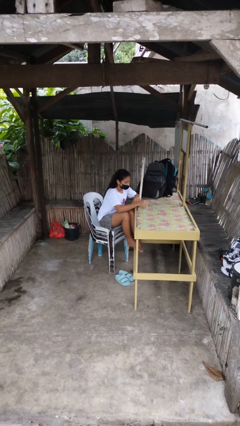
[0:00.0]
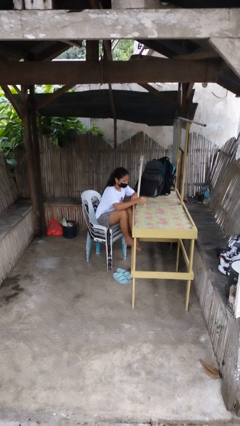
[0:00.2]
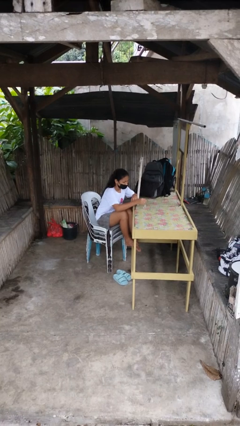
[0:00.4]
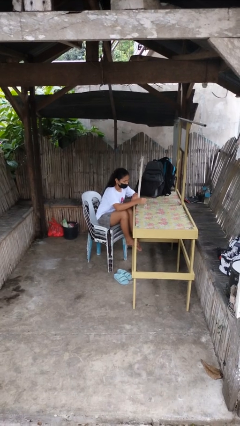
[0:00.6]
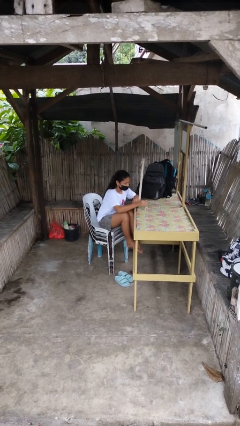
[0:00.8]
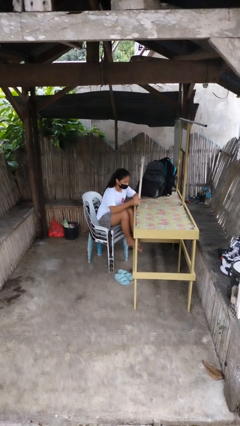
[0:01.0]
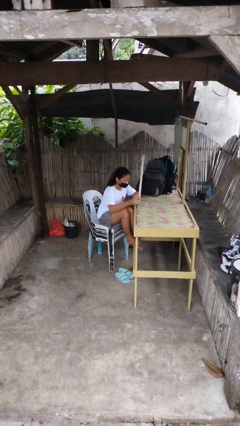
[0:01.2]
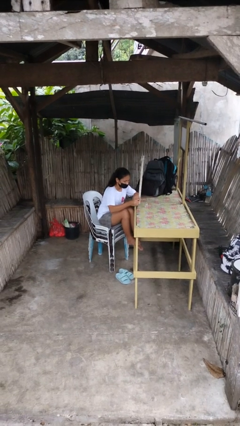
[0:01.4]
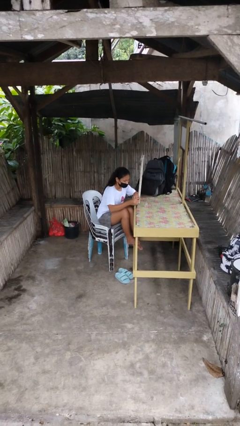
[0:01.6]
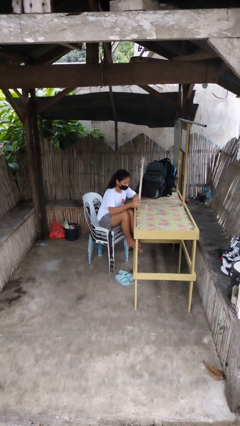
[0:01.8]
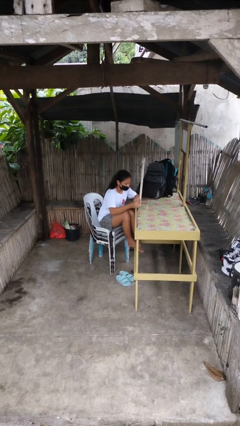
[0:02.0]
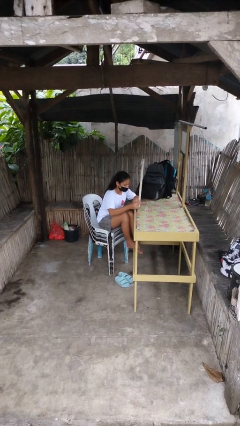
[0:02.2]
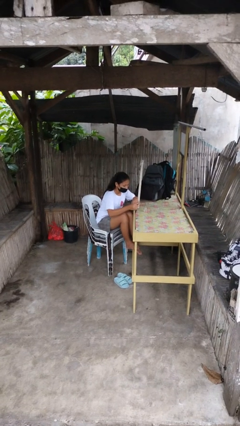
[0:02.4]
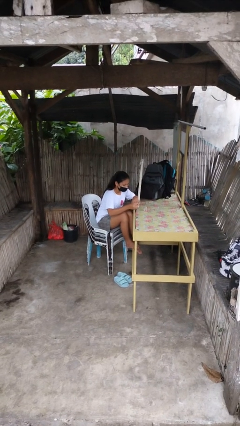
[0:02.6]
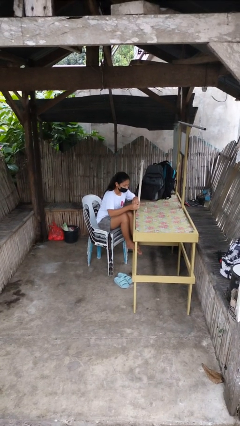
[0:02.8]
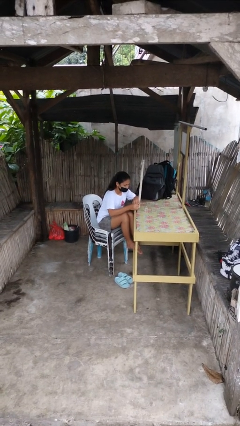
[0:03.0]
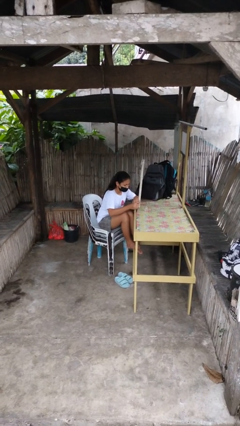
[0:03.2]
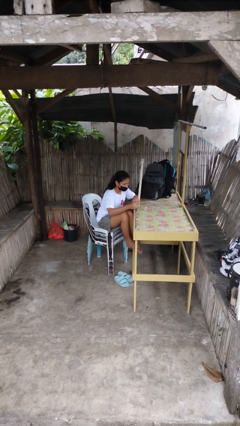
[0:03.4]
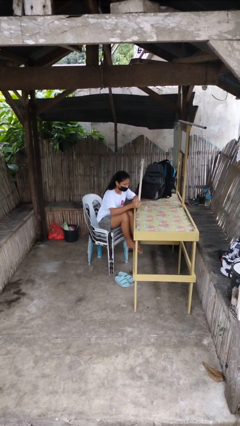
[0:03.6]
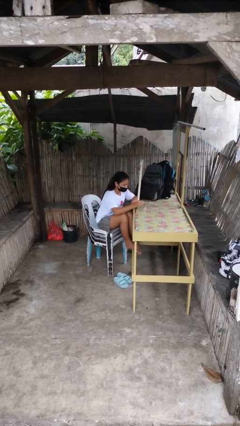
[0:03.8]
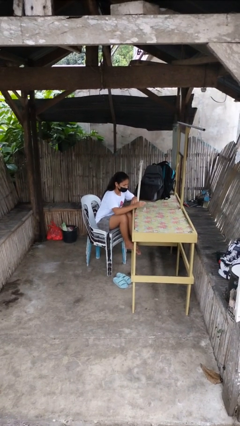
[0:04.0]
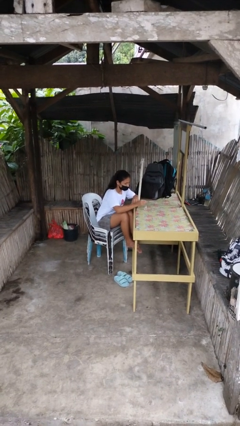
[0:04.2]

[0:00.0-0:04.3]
person paints fingernails

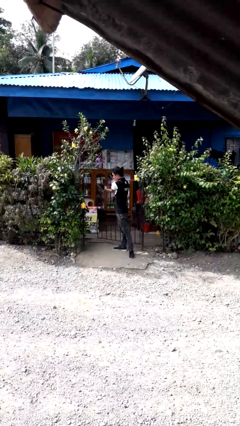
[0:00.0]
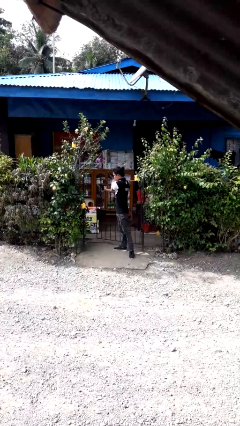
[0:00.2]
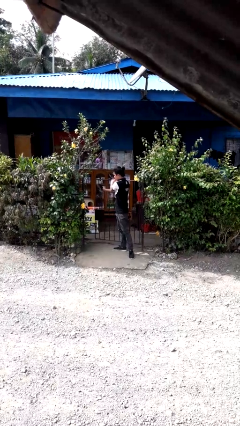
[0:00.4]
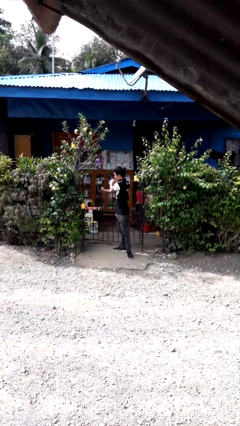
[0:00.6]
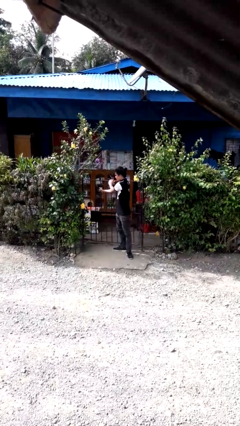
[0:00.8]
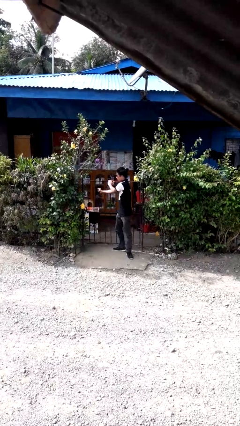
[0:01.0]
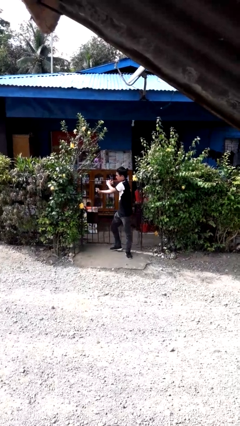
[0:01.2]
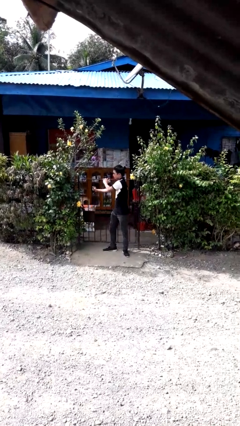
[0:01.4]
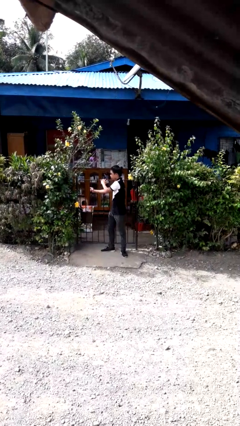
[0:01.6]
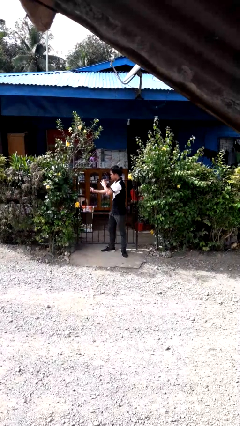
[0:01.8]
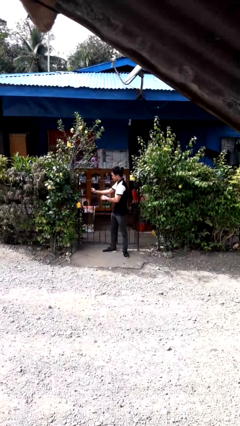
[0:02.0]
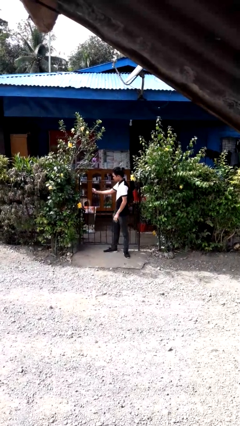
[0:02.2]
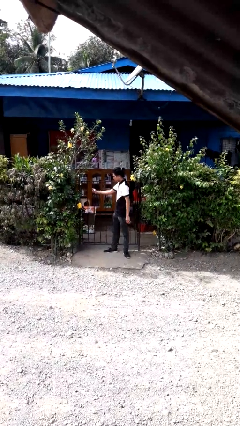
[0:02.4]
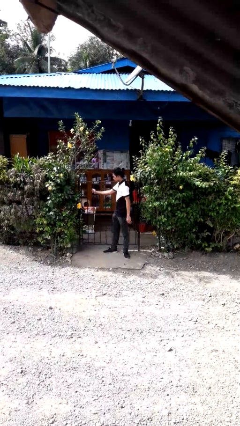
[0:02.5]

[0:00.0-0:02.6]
person closes gate

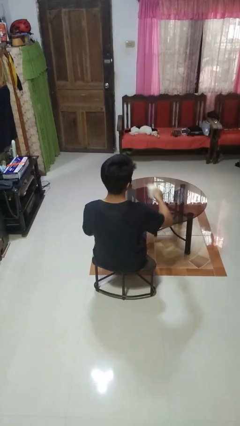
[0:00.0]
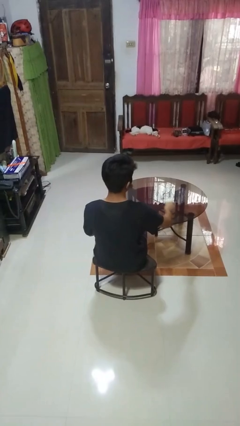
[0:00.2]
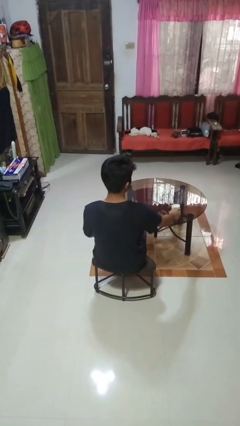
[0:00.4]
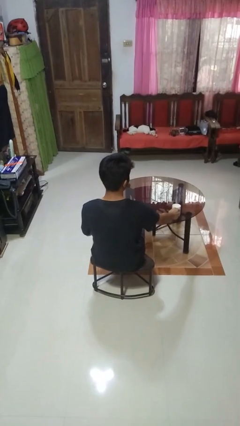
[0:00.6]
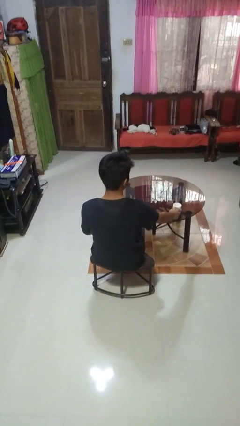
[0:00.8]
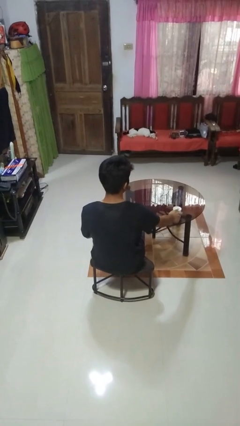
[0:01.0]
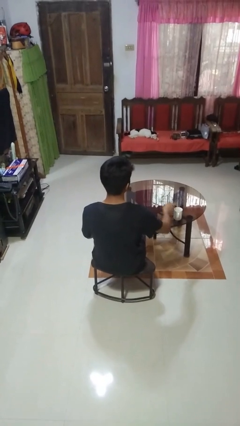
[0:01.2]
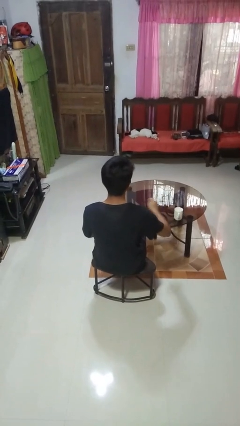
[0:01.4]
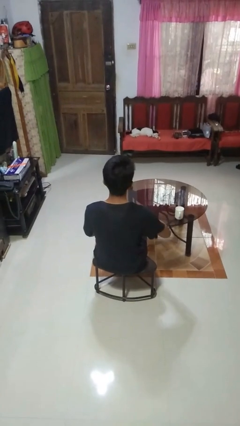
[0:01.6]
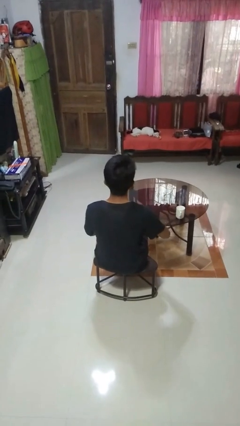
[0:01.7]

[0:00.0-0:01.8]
person puts down object on table

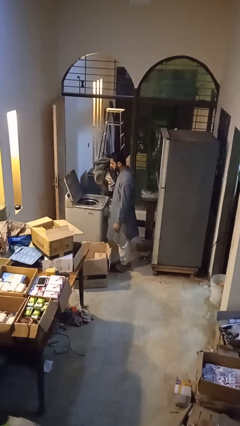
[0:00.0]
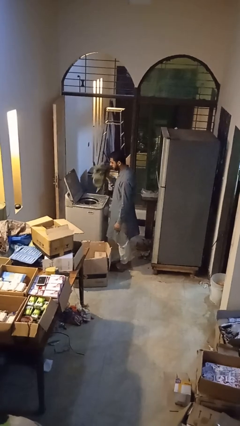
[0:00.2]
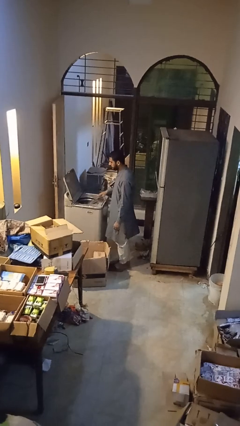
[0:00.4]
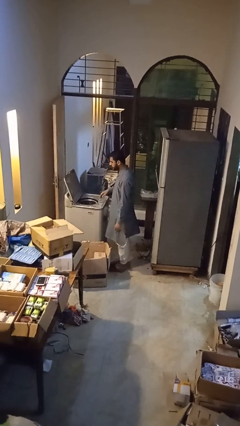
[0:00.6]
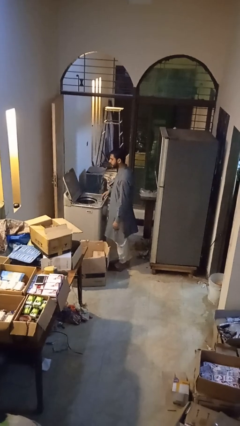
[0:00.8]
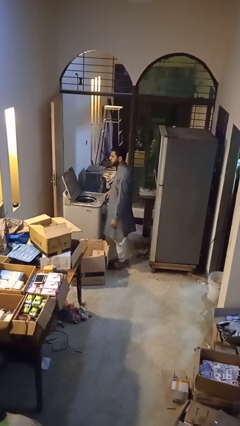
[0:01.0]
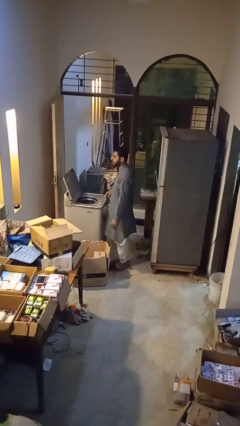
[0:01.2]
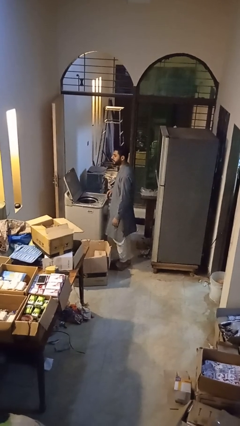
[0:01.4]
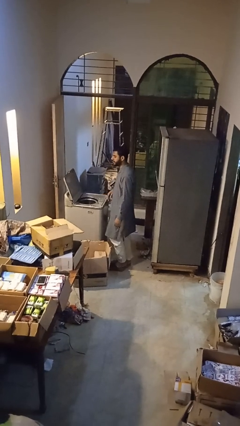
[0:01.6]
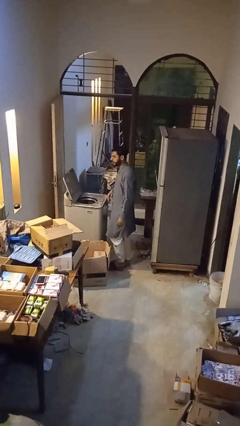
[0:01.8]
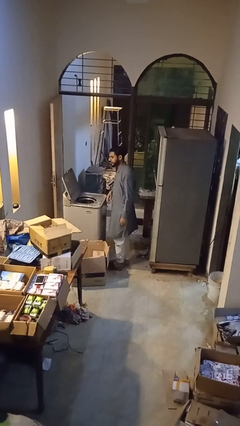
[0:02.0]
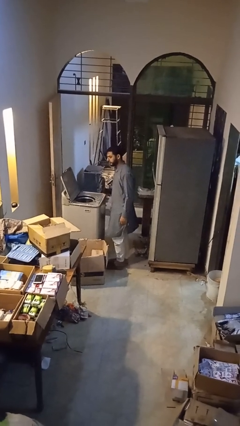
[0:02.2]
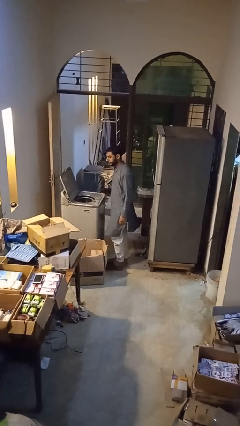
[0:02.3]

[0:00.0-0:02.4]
person loads clotheswasher

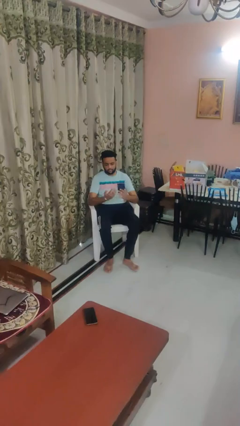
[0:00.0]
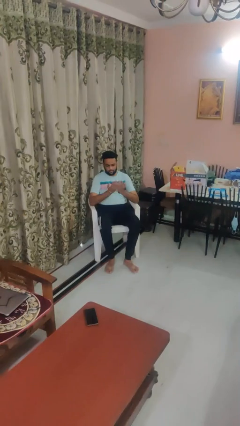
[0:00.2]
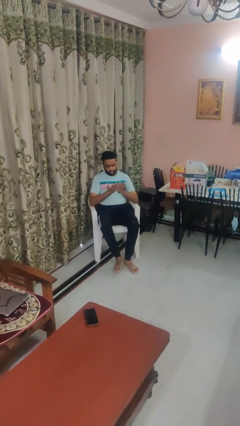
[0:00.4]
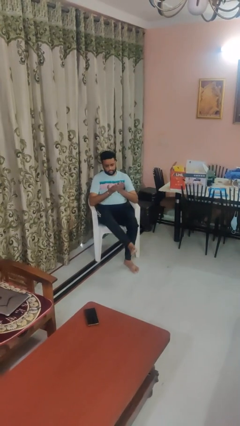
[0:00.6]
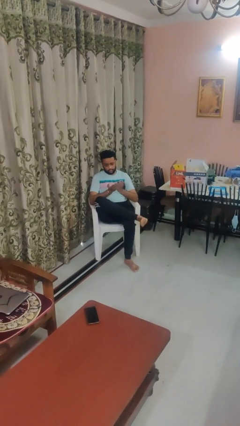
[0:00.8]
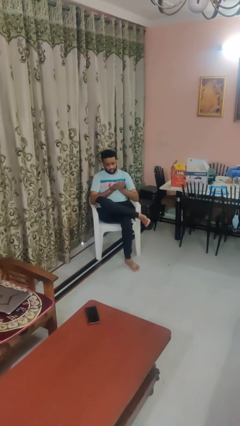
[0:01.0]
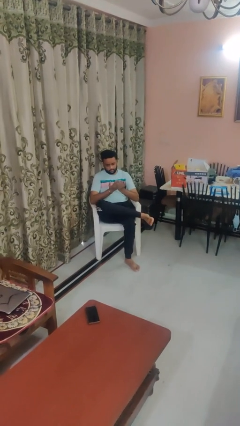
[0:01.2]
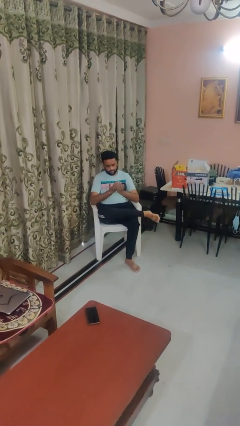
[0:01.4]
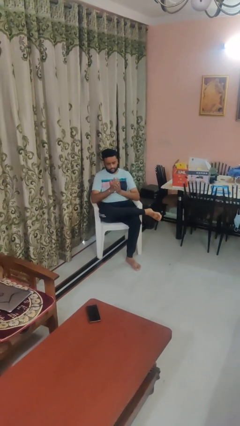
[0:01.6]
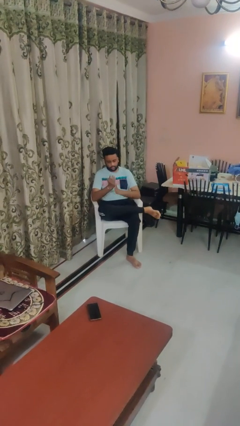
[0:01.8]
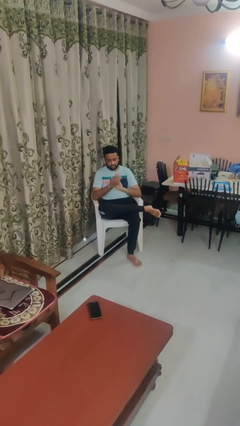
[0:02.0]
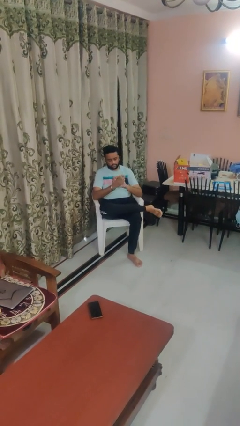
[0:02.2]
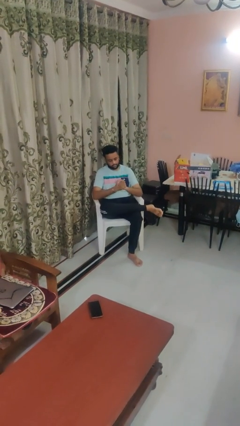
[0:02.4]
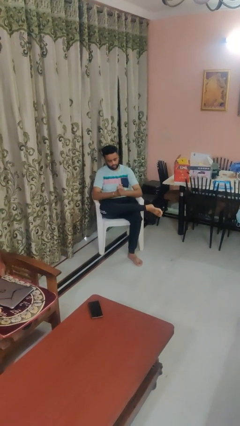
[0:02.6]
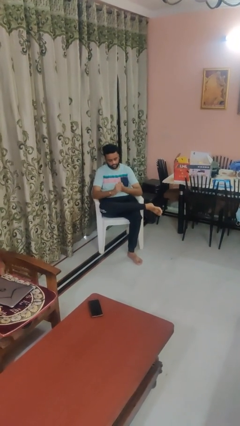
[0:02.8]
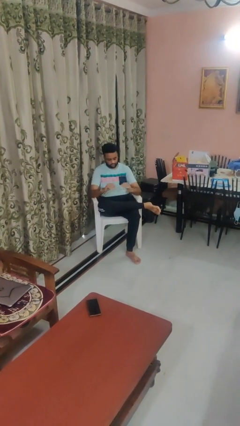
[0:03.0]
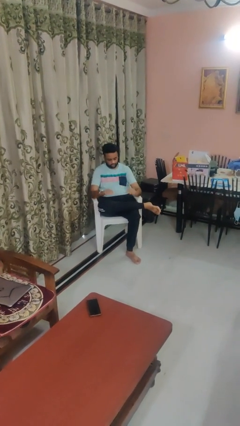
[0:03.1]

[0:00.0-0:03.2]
person looks at hands in lap

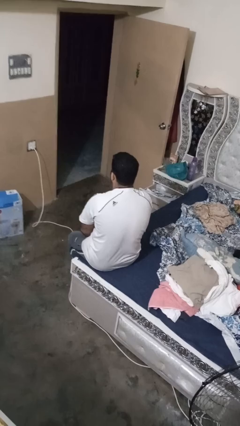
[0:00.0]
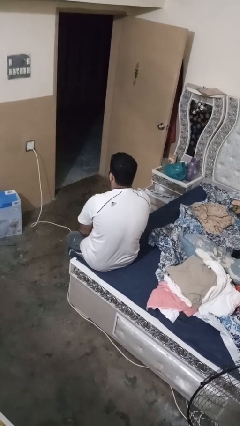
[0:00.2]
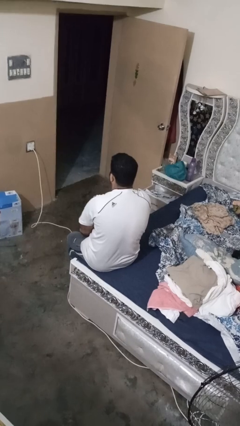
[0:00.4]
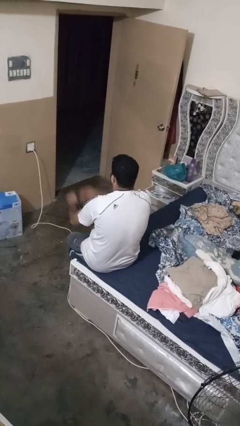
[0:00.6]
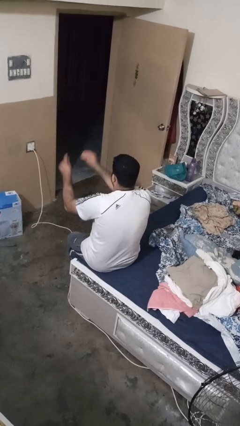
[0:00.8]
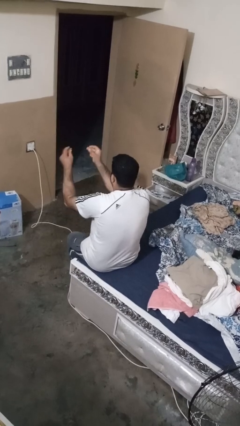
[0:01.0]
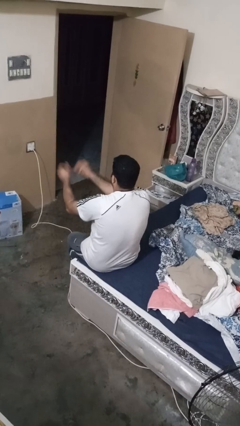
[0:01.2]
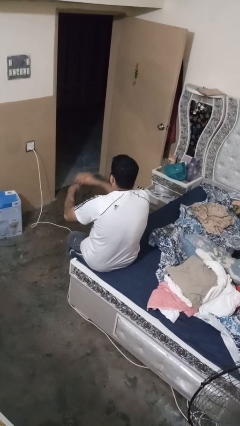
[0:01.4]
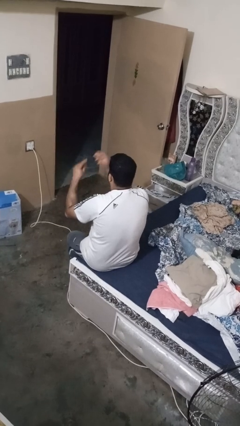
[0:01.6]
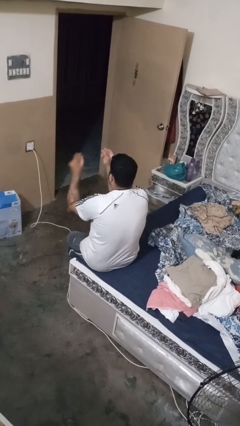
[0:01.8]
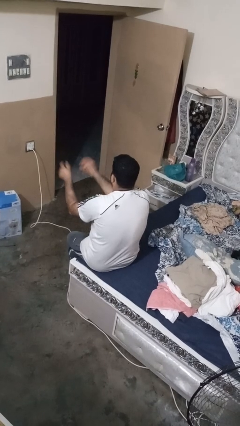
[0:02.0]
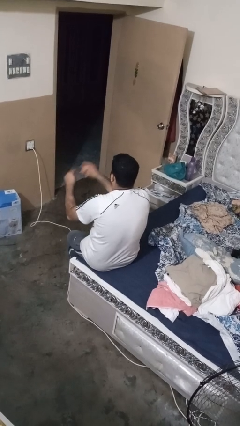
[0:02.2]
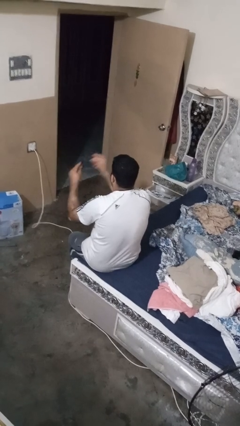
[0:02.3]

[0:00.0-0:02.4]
person snaps fingers

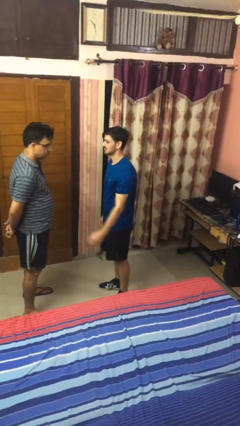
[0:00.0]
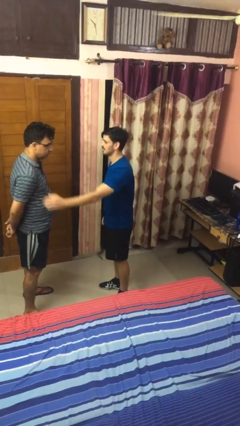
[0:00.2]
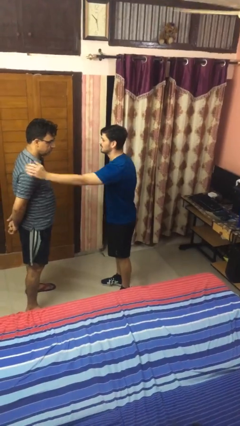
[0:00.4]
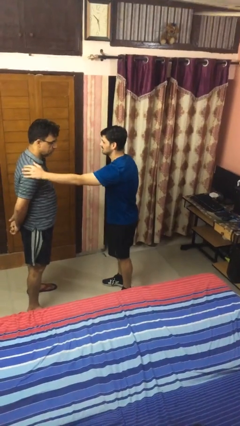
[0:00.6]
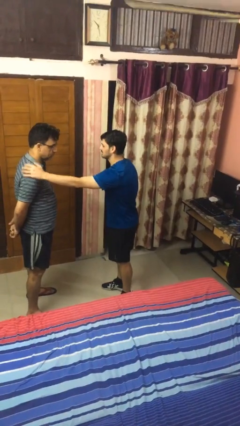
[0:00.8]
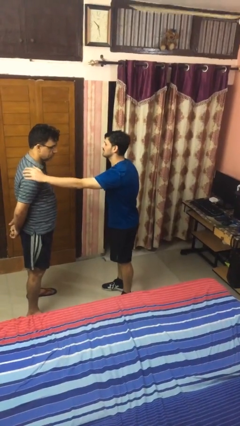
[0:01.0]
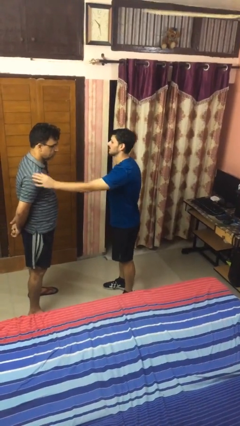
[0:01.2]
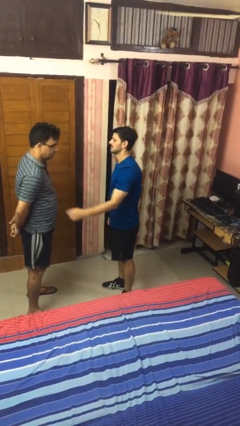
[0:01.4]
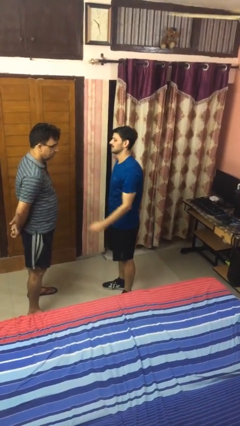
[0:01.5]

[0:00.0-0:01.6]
person pounds shoulders of person
